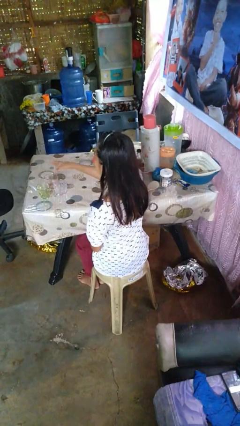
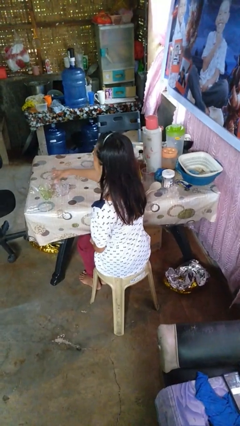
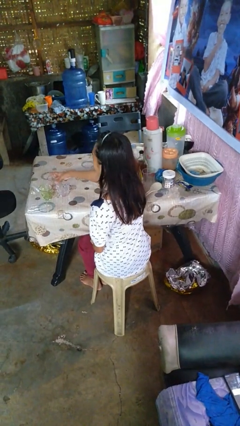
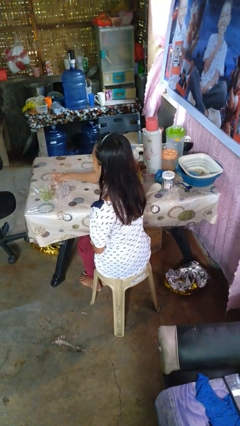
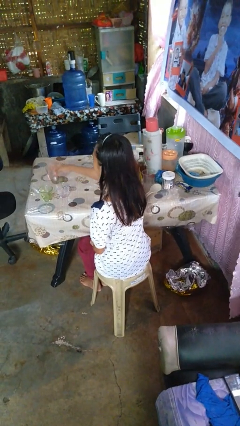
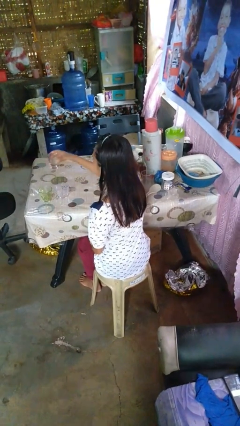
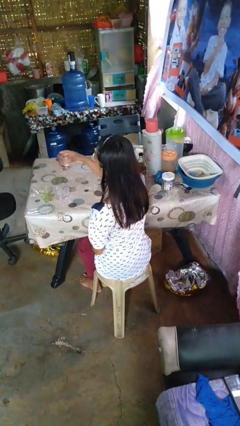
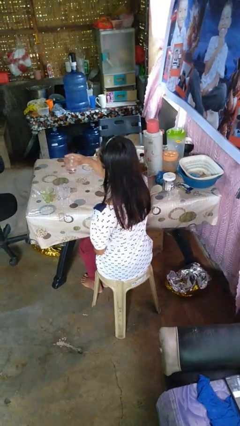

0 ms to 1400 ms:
person picks up object from table

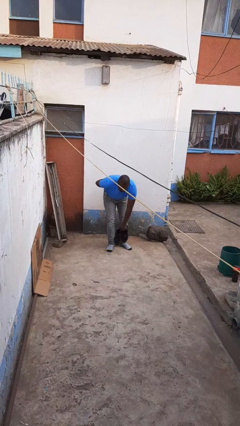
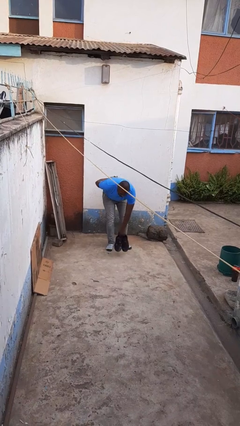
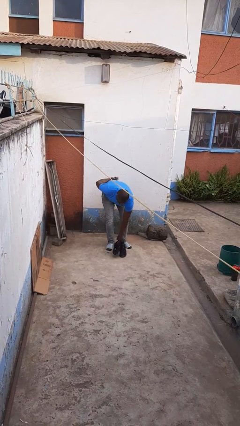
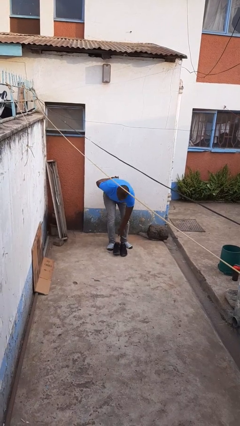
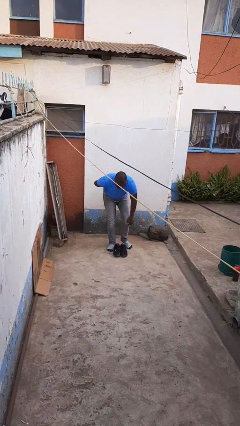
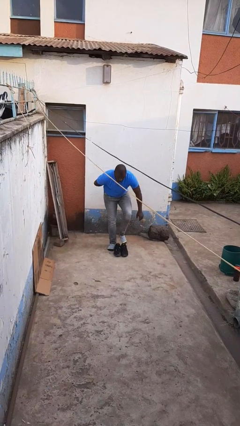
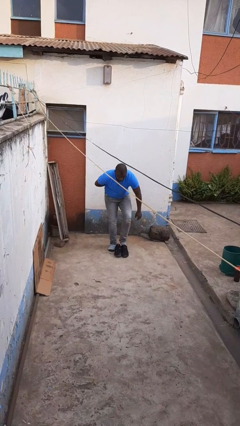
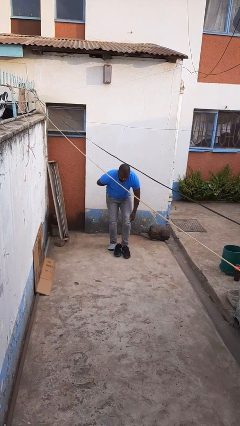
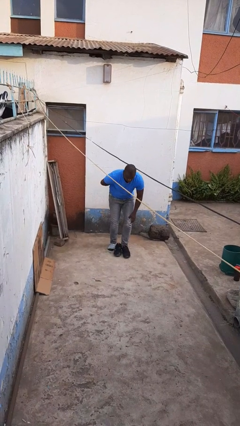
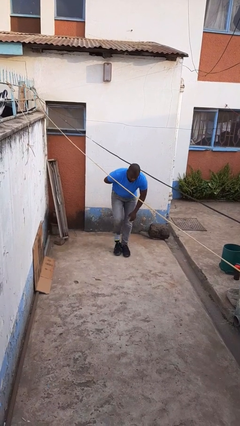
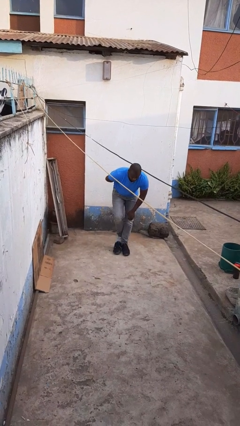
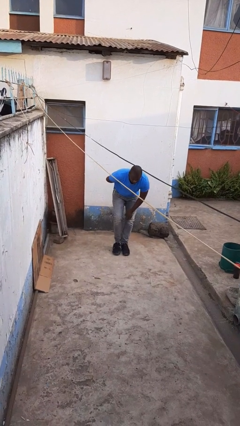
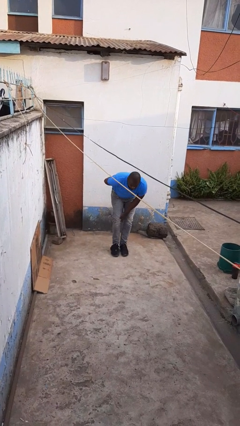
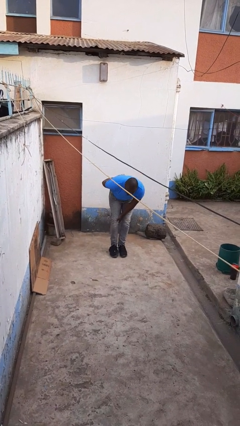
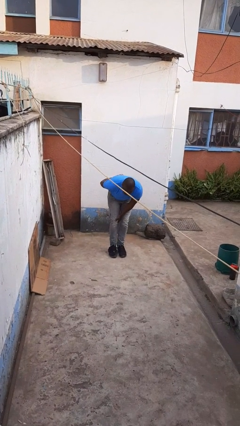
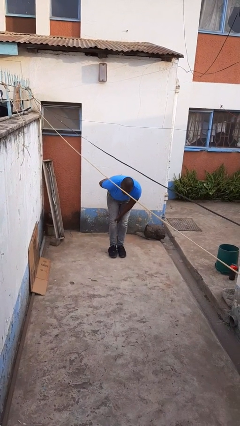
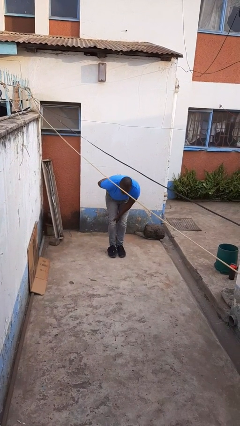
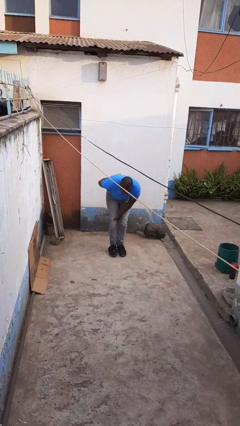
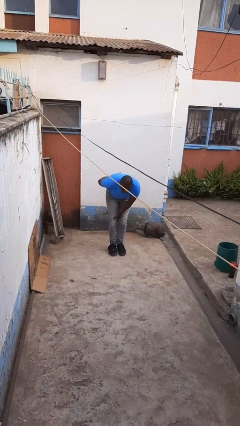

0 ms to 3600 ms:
person puts on shoes

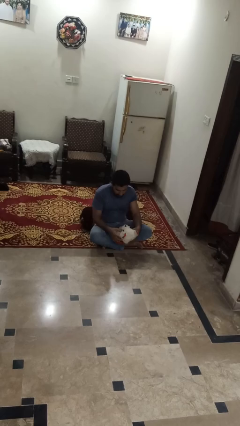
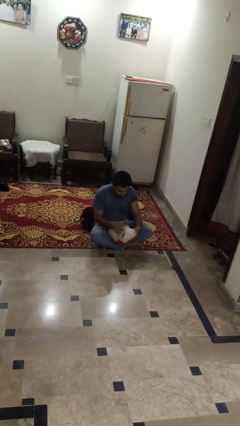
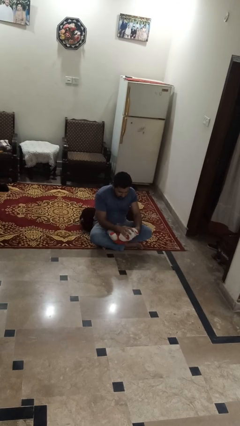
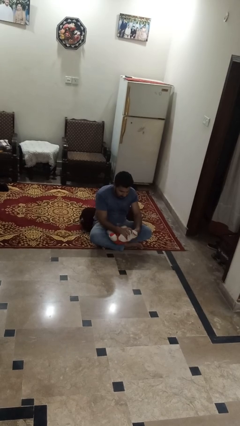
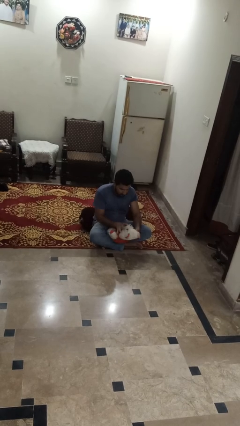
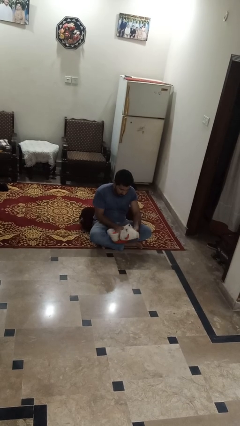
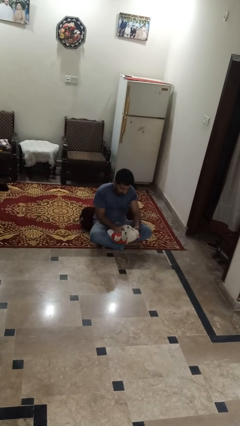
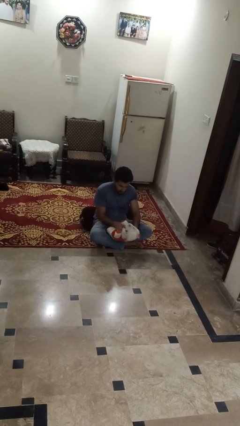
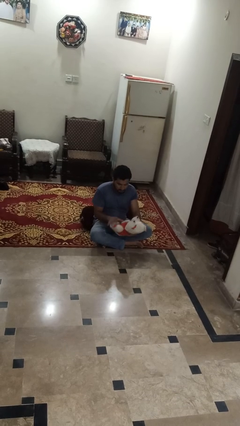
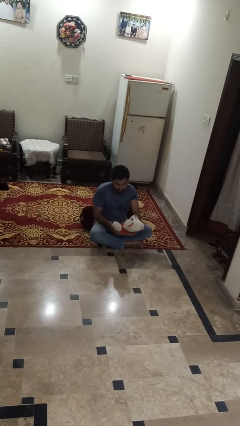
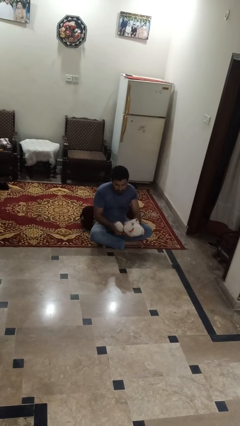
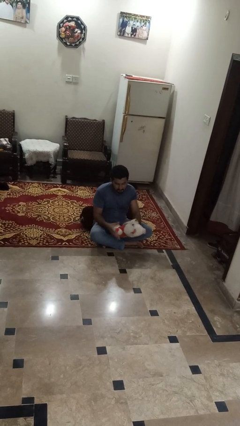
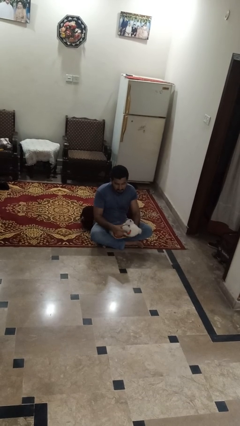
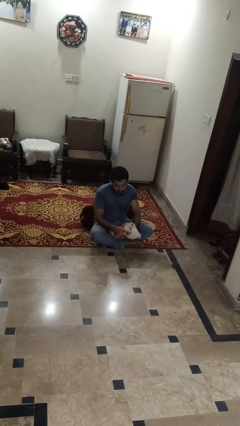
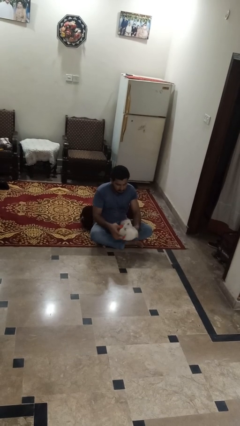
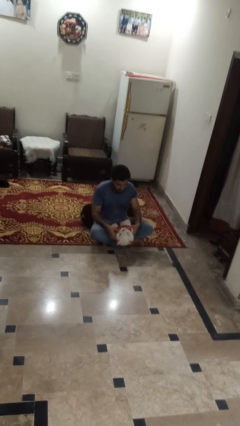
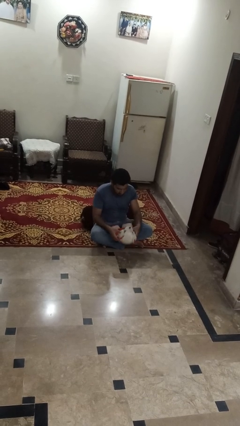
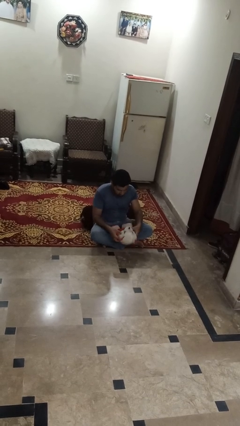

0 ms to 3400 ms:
person squeezes object

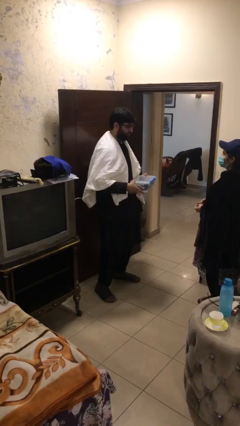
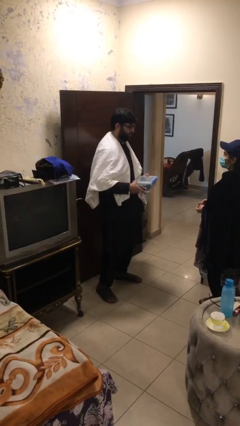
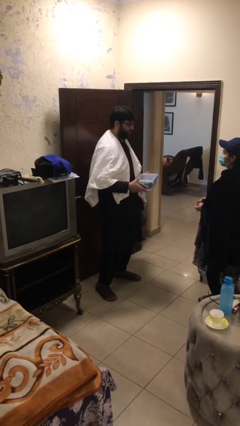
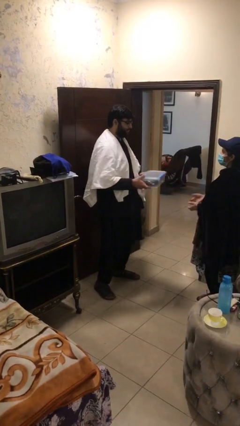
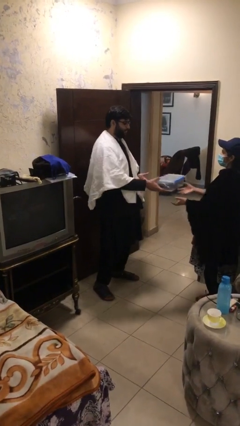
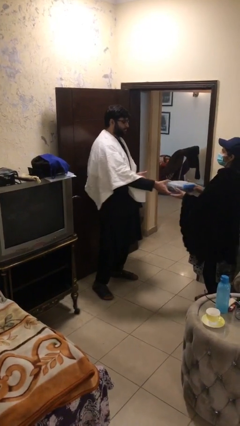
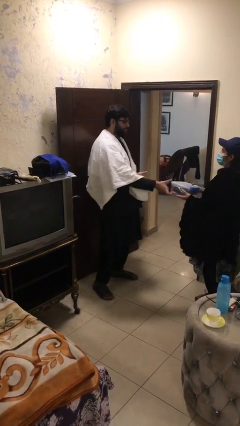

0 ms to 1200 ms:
person transfers object to person

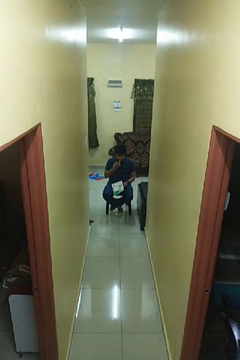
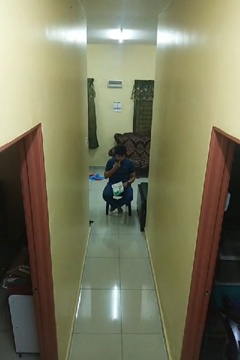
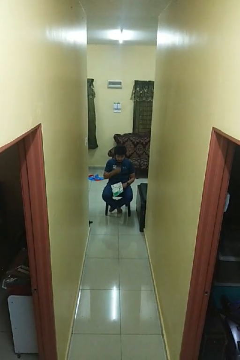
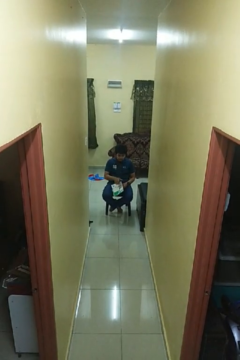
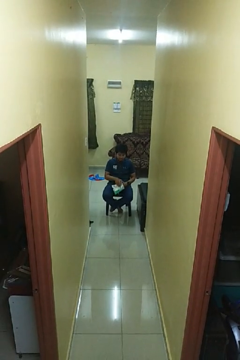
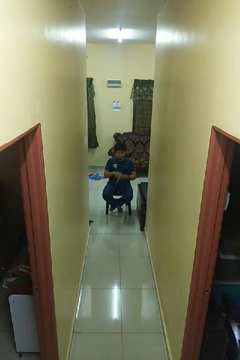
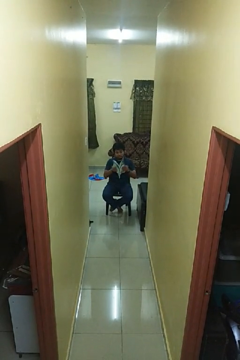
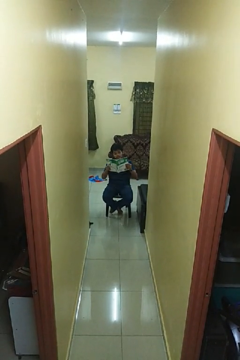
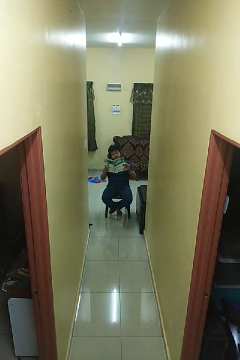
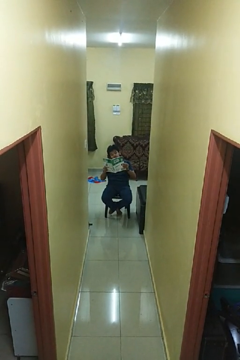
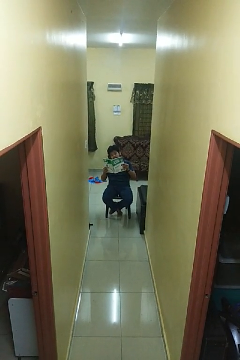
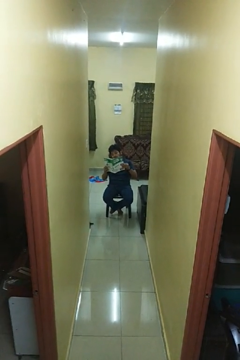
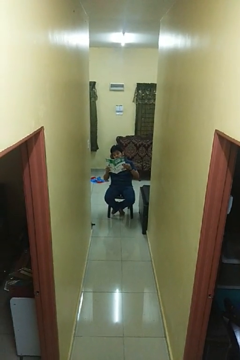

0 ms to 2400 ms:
person reads magazine

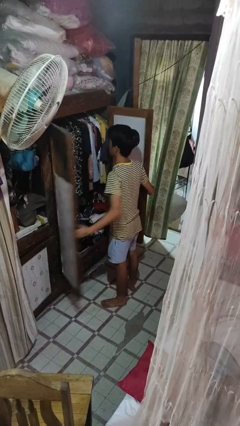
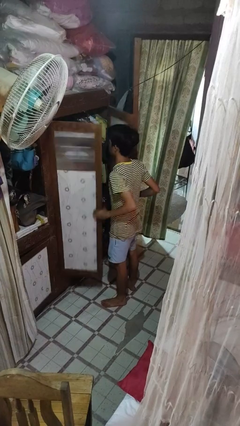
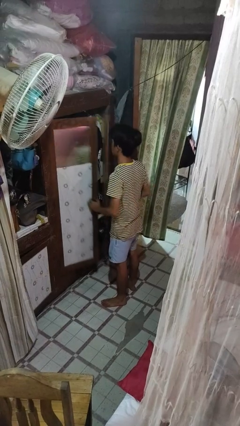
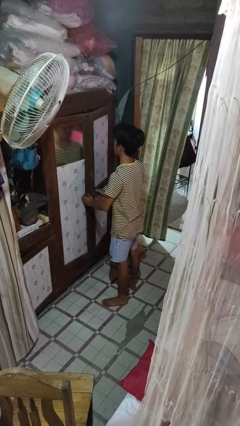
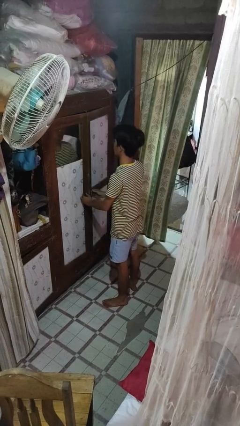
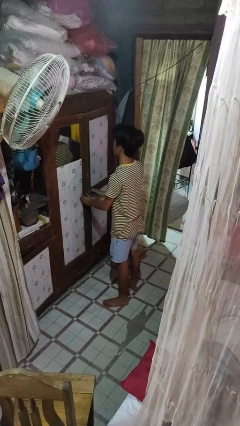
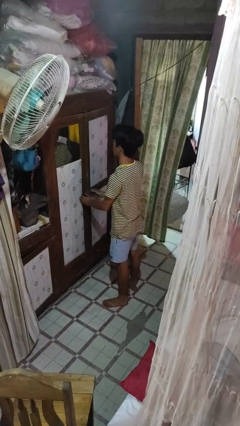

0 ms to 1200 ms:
person closes closet door

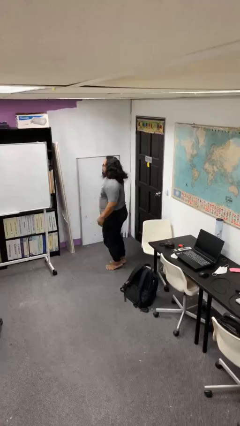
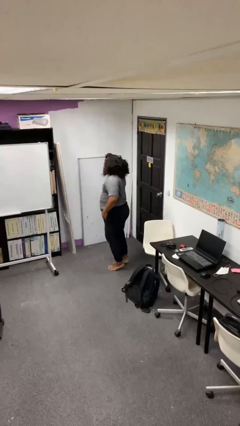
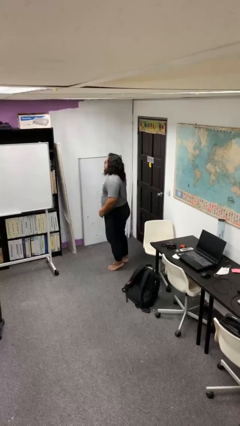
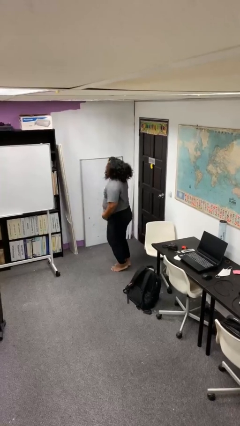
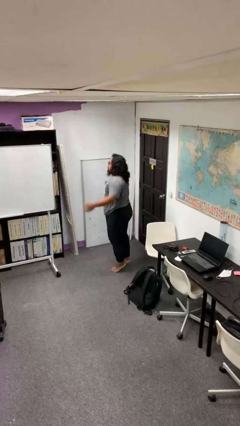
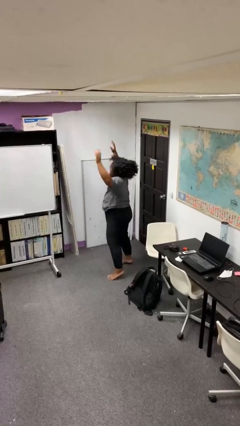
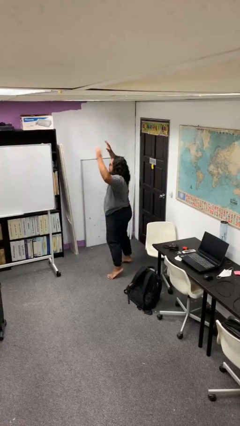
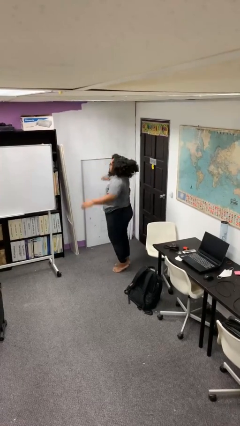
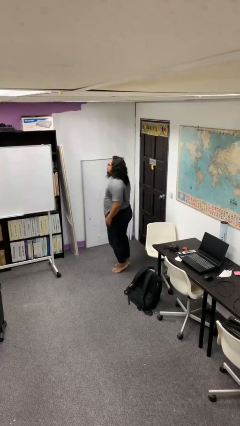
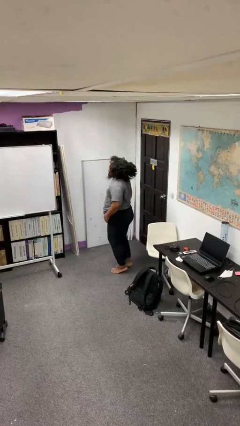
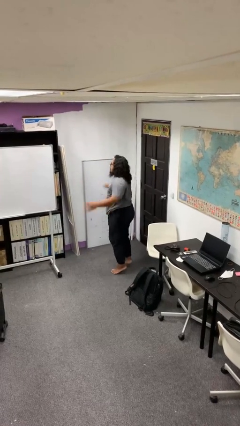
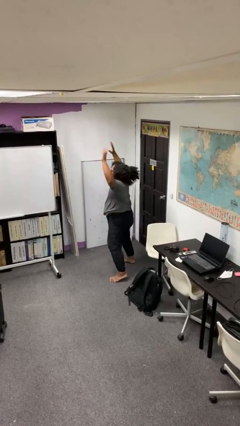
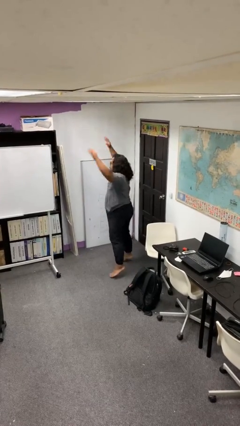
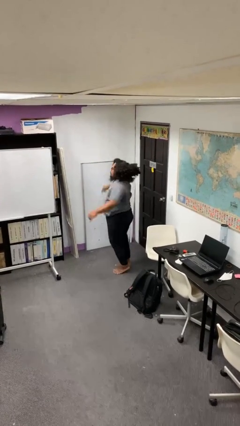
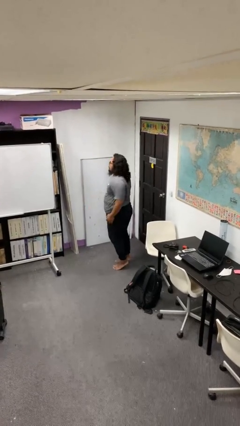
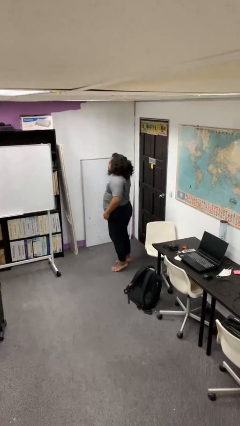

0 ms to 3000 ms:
person exercises with jumping jacks

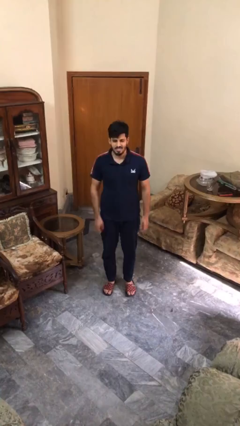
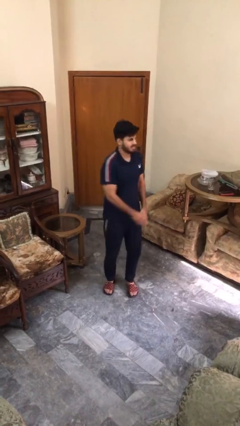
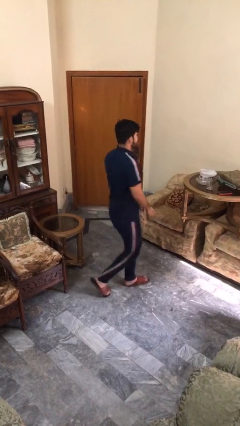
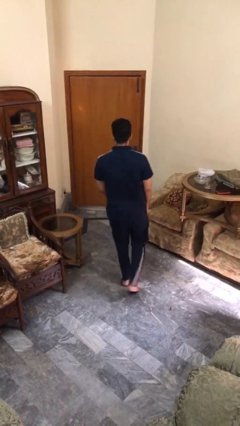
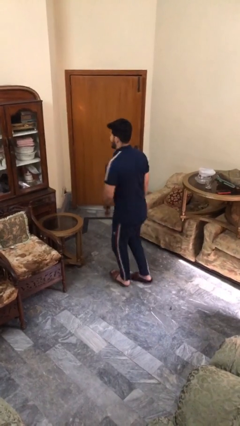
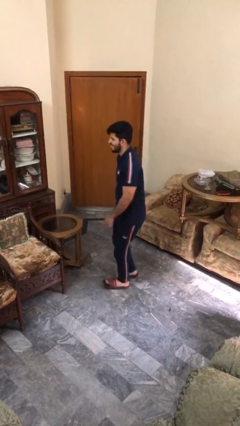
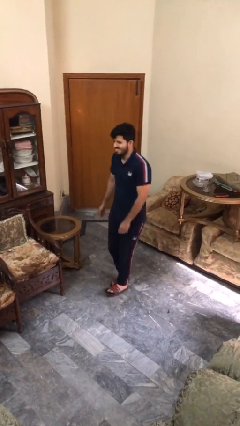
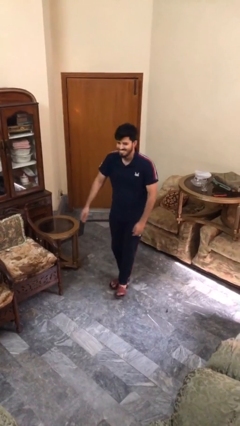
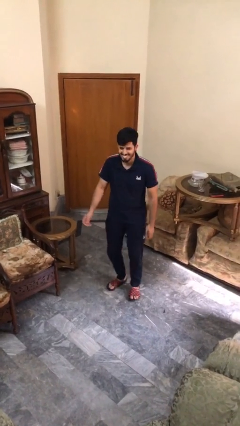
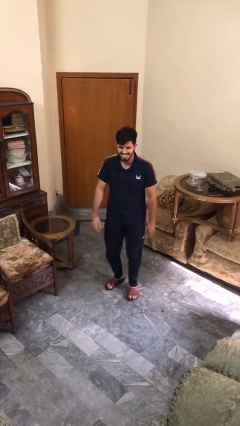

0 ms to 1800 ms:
person twirls
